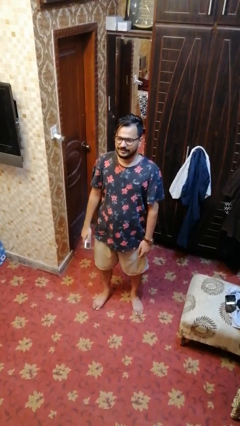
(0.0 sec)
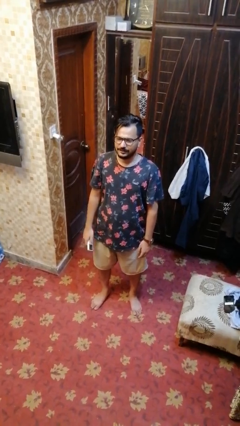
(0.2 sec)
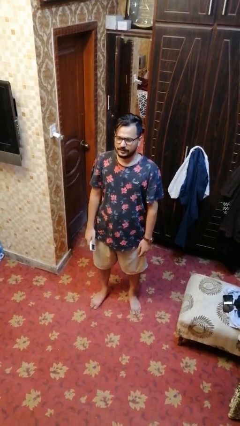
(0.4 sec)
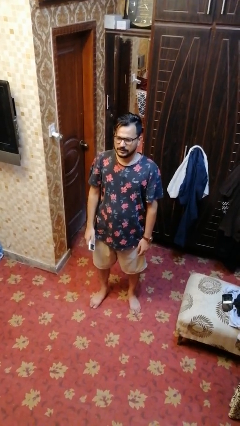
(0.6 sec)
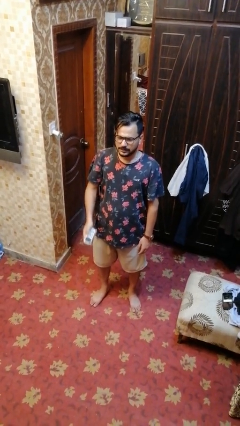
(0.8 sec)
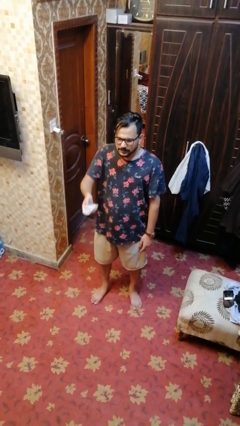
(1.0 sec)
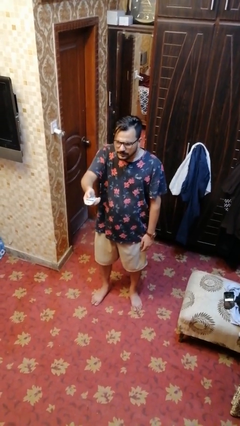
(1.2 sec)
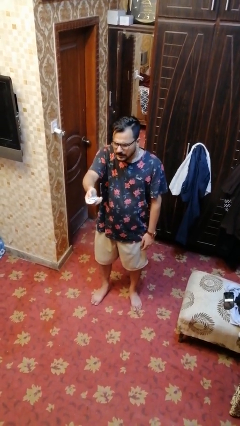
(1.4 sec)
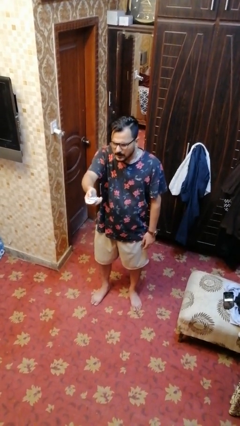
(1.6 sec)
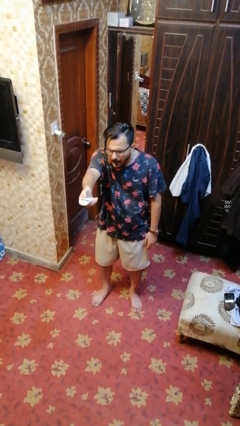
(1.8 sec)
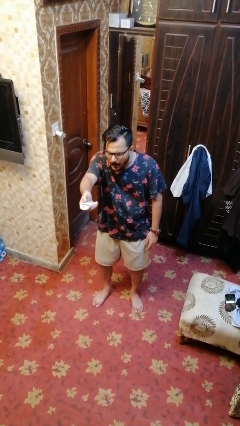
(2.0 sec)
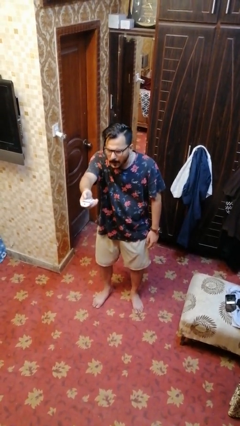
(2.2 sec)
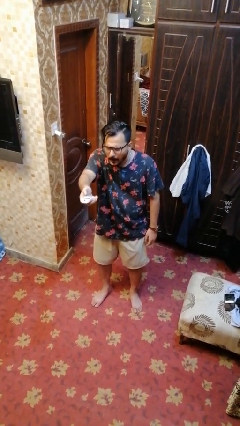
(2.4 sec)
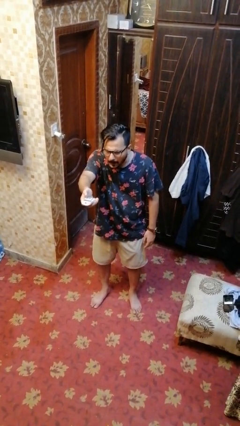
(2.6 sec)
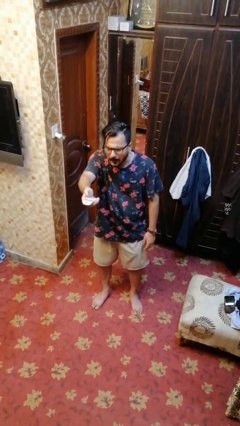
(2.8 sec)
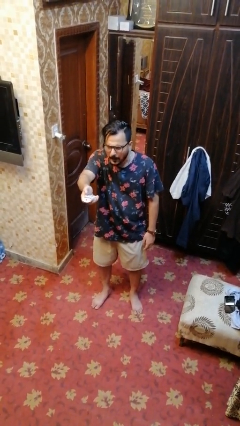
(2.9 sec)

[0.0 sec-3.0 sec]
person uses television remote

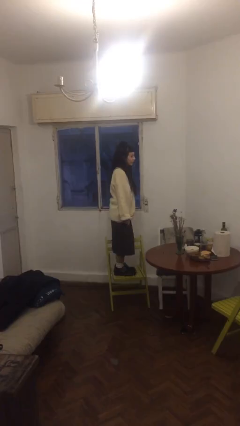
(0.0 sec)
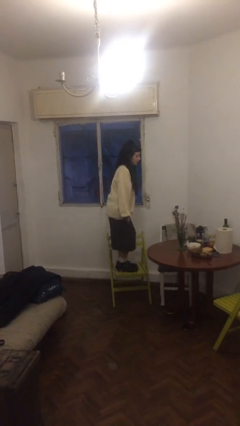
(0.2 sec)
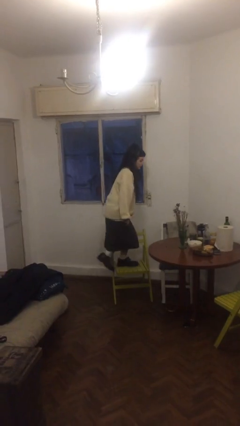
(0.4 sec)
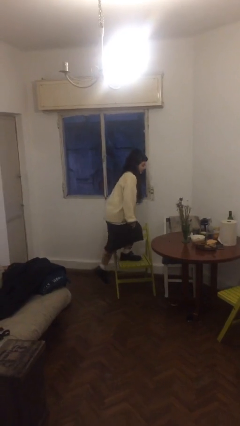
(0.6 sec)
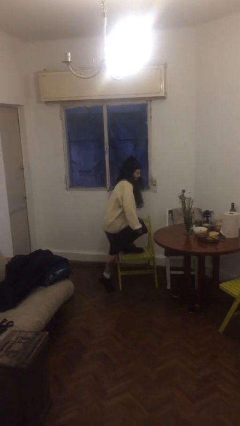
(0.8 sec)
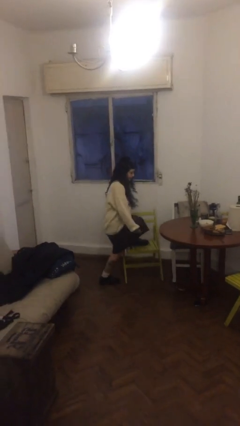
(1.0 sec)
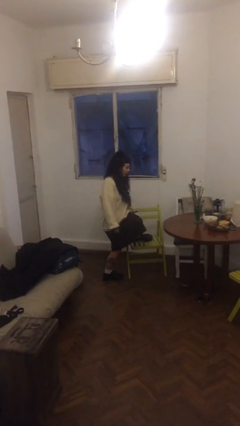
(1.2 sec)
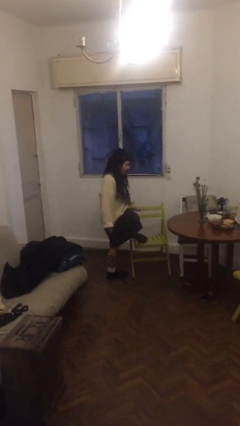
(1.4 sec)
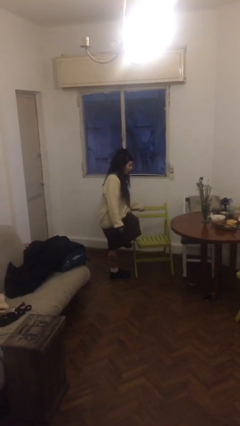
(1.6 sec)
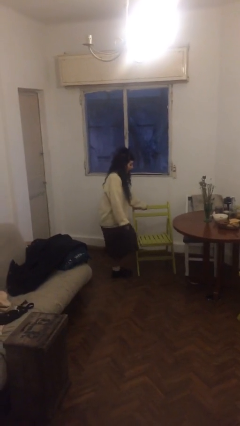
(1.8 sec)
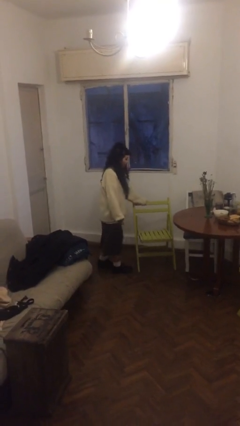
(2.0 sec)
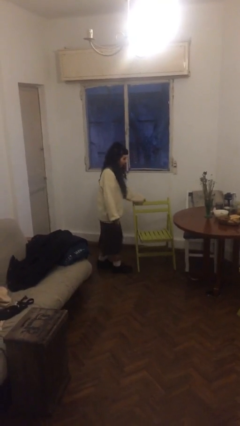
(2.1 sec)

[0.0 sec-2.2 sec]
person climbs off chair

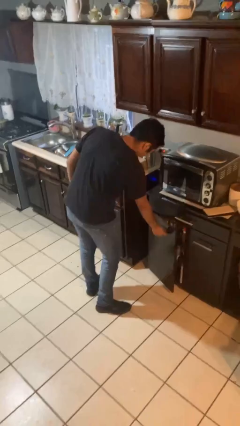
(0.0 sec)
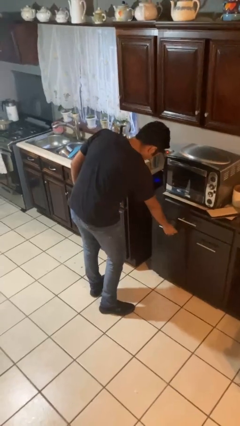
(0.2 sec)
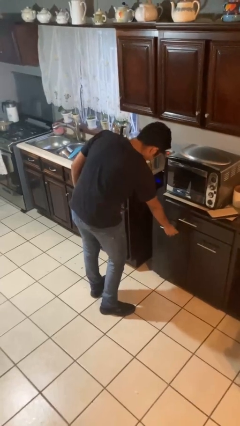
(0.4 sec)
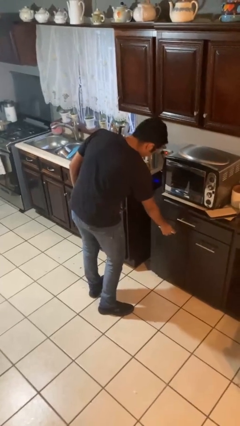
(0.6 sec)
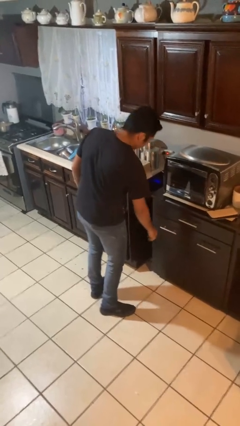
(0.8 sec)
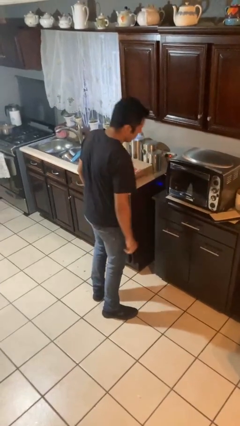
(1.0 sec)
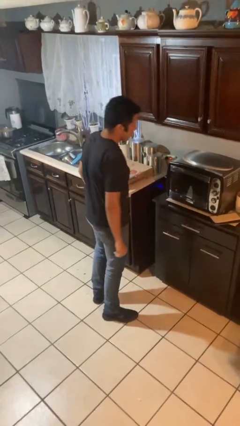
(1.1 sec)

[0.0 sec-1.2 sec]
person closes cabinet

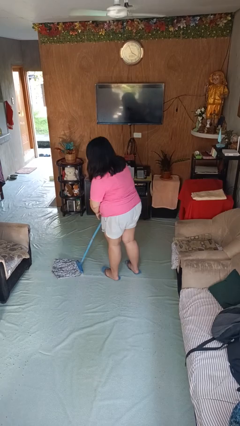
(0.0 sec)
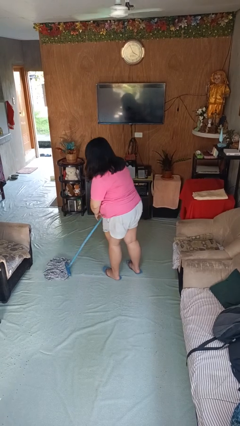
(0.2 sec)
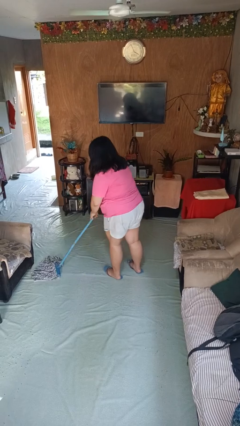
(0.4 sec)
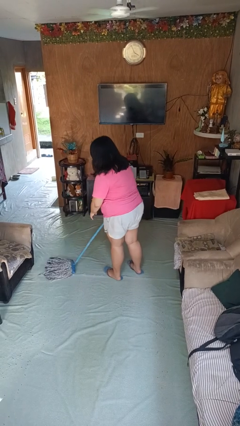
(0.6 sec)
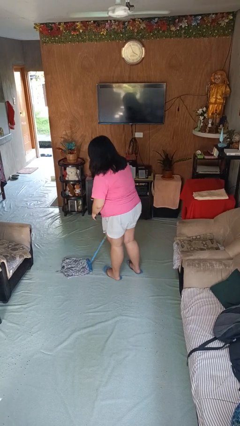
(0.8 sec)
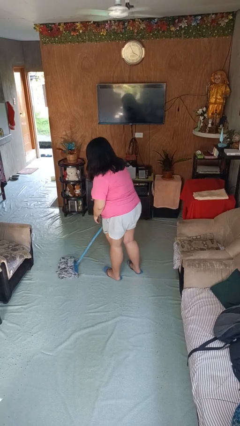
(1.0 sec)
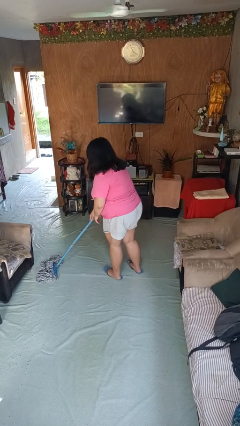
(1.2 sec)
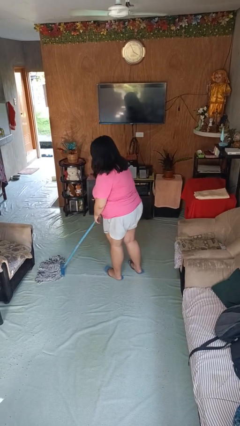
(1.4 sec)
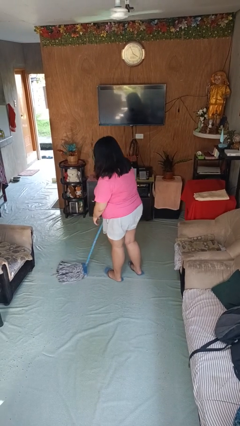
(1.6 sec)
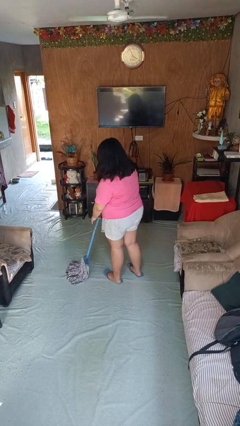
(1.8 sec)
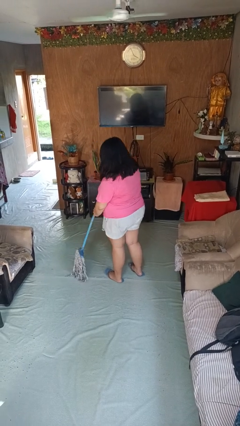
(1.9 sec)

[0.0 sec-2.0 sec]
person mops

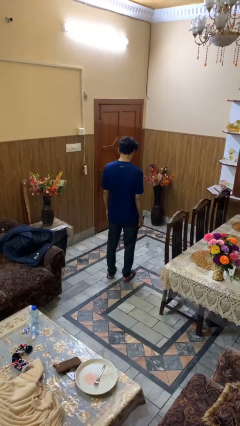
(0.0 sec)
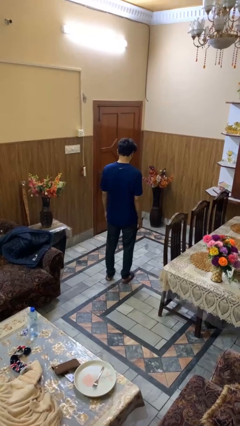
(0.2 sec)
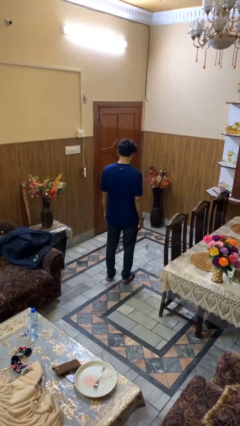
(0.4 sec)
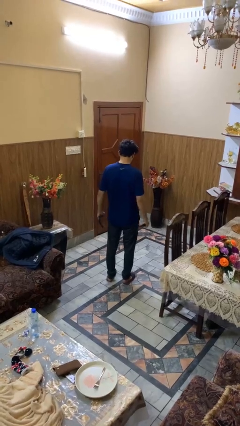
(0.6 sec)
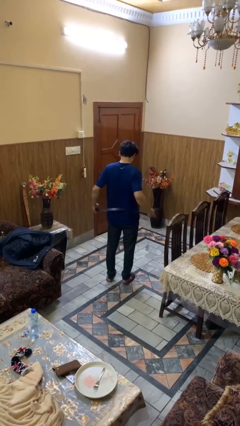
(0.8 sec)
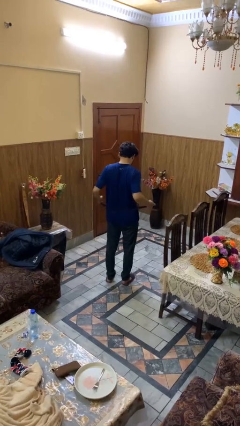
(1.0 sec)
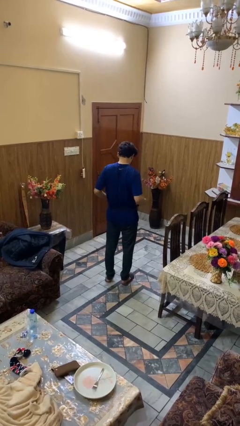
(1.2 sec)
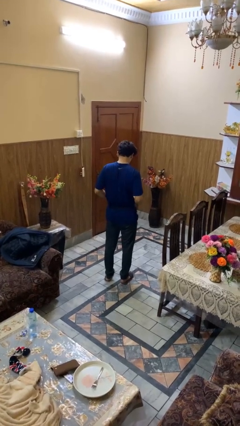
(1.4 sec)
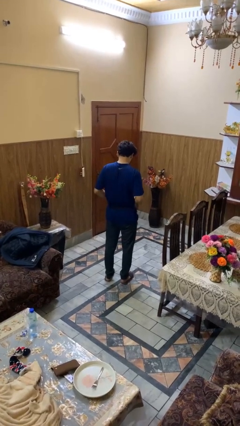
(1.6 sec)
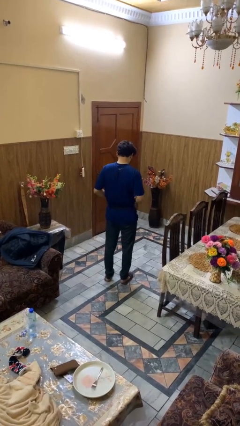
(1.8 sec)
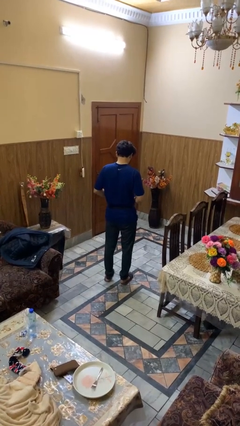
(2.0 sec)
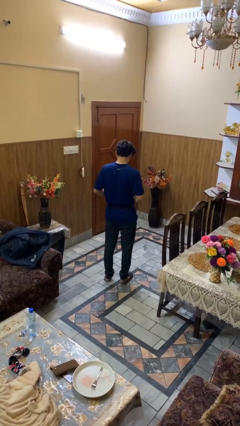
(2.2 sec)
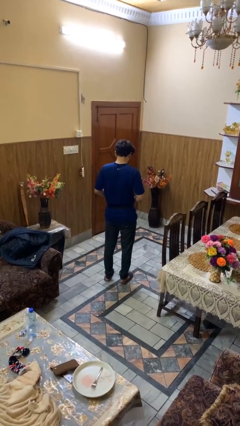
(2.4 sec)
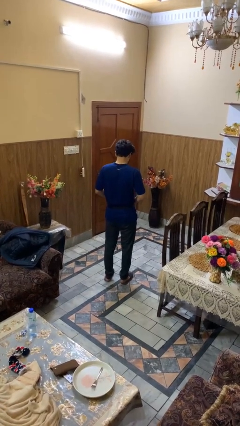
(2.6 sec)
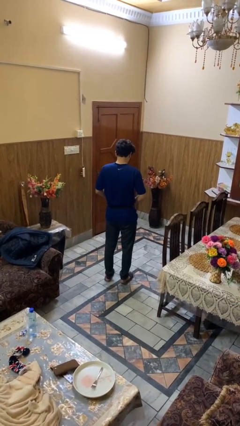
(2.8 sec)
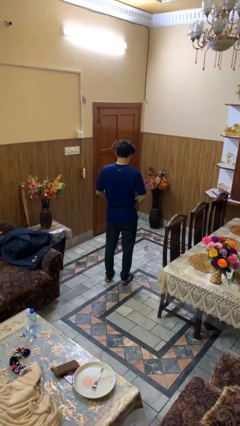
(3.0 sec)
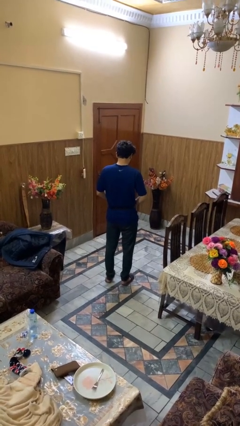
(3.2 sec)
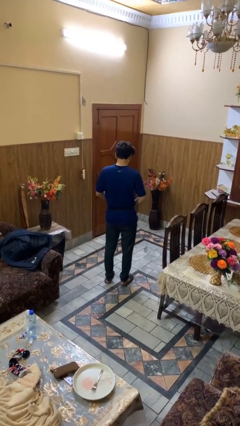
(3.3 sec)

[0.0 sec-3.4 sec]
person puts on belt

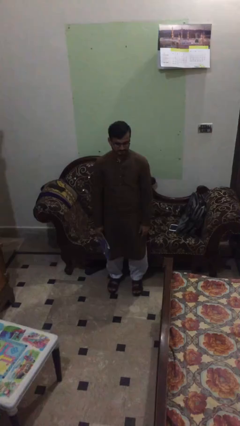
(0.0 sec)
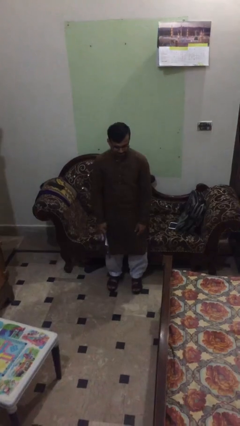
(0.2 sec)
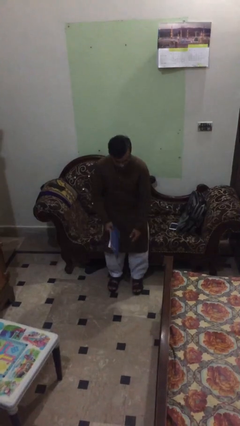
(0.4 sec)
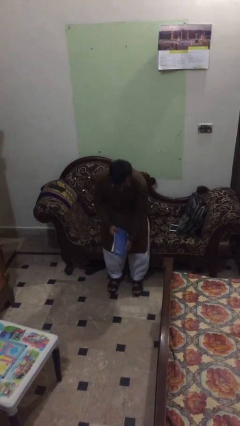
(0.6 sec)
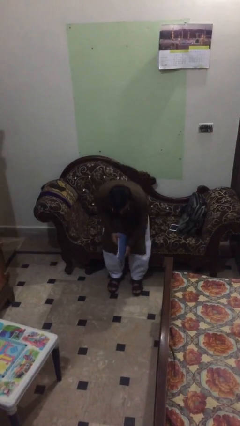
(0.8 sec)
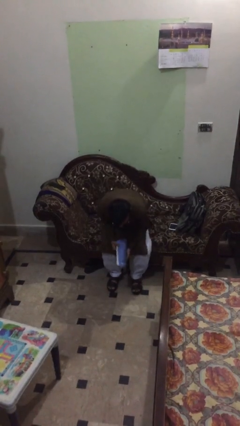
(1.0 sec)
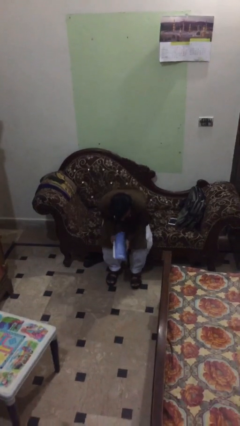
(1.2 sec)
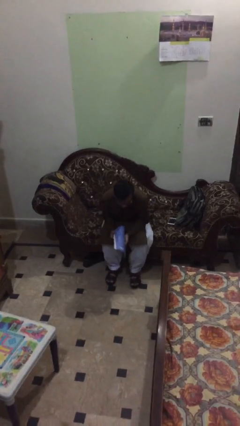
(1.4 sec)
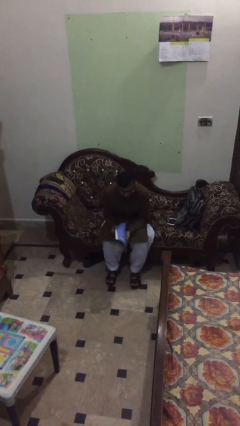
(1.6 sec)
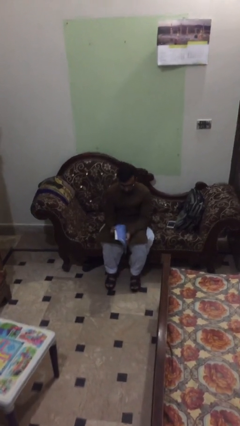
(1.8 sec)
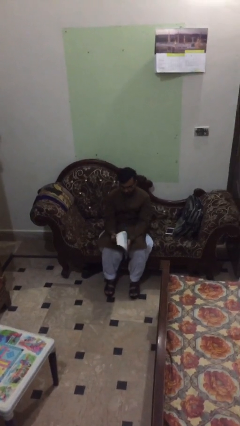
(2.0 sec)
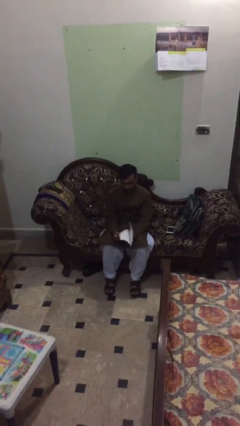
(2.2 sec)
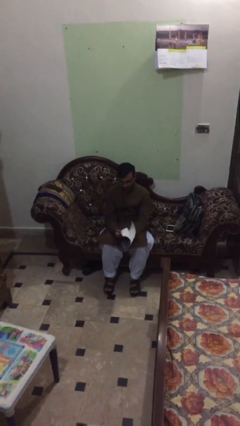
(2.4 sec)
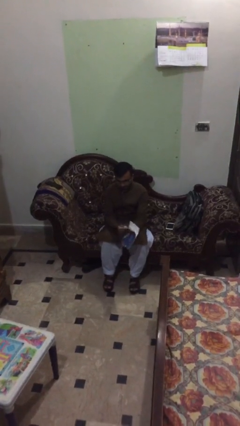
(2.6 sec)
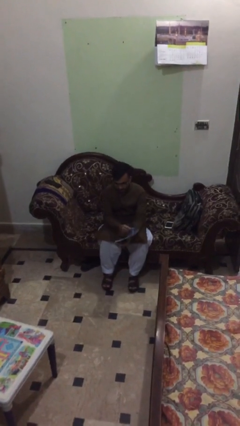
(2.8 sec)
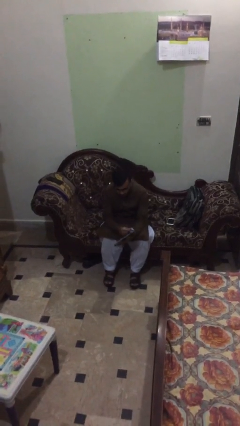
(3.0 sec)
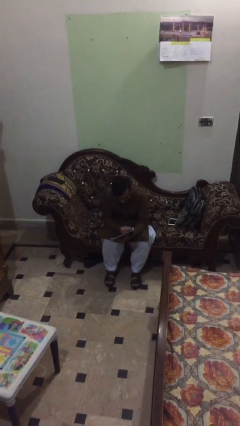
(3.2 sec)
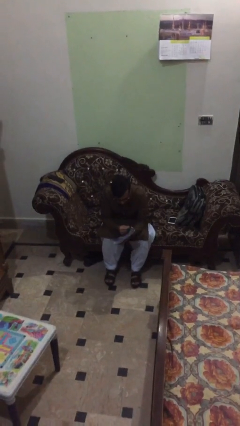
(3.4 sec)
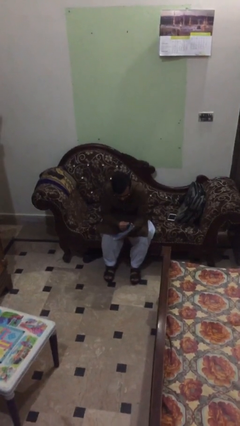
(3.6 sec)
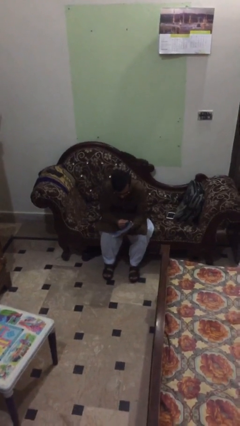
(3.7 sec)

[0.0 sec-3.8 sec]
person sits down

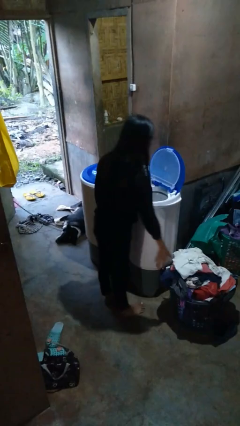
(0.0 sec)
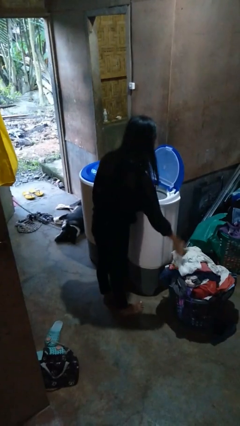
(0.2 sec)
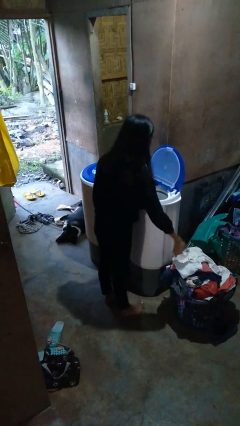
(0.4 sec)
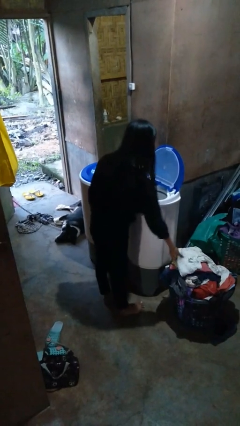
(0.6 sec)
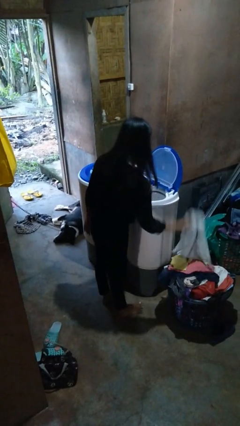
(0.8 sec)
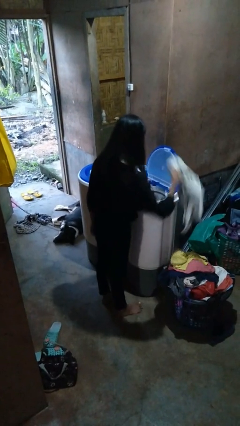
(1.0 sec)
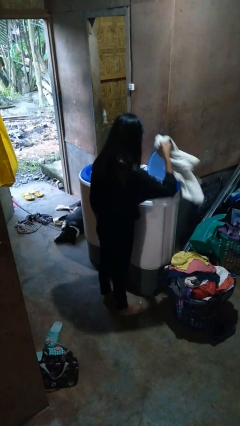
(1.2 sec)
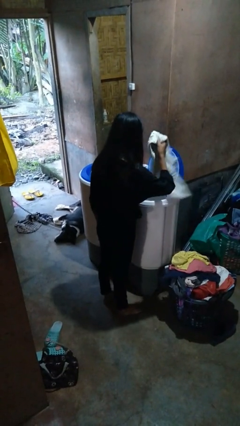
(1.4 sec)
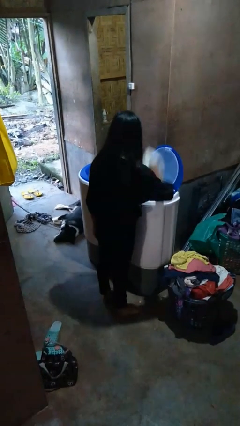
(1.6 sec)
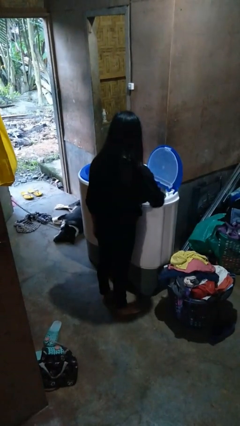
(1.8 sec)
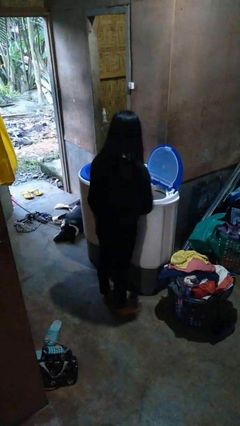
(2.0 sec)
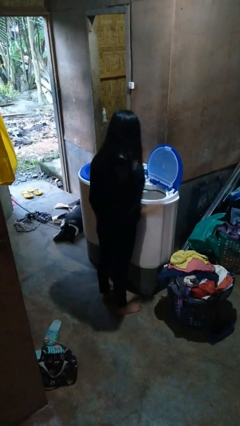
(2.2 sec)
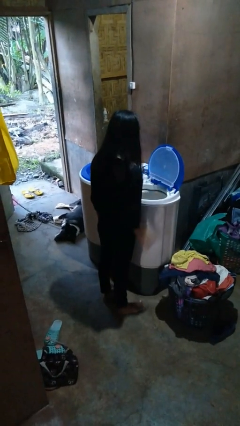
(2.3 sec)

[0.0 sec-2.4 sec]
person loads dryer
